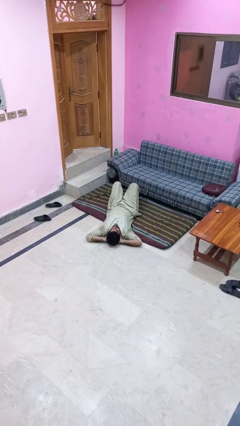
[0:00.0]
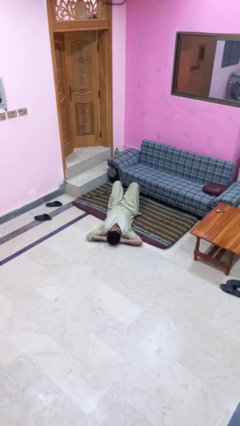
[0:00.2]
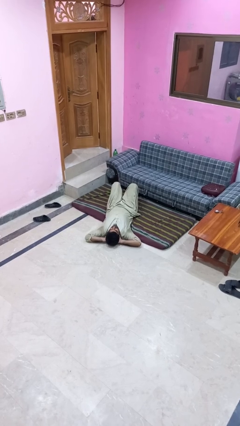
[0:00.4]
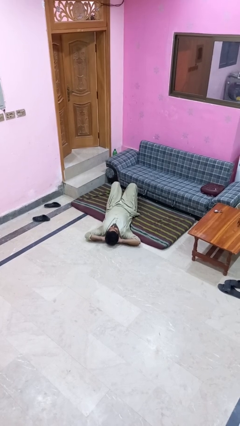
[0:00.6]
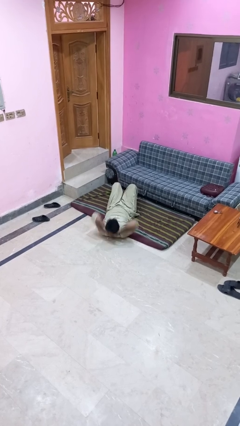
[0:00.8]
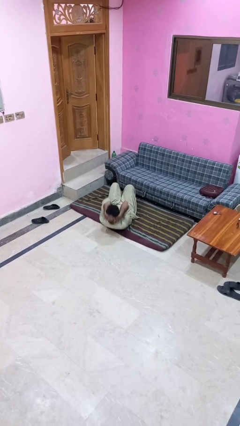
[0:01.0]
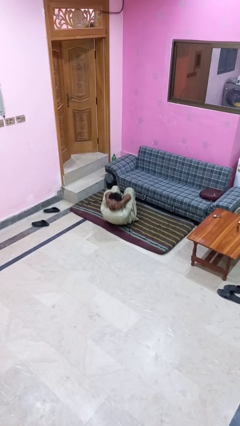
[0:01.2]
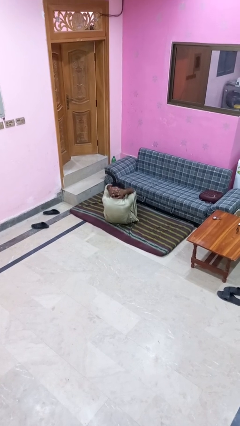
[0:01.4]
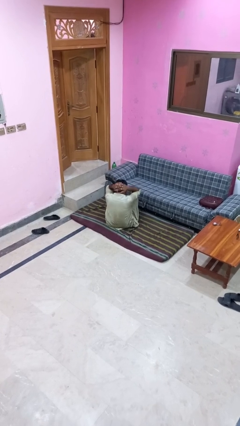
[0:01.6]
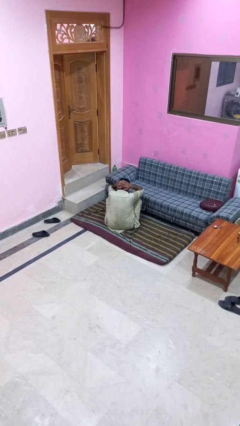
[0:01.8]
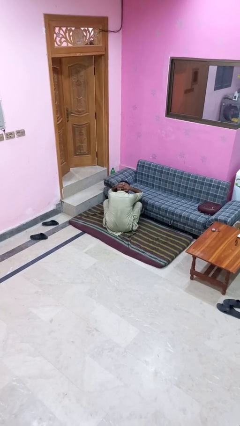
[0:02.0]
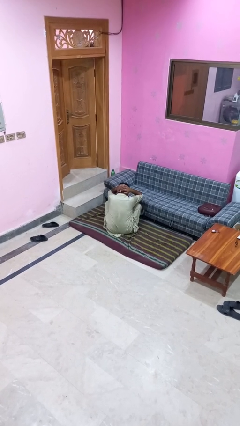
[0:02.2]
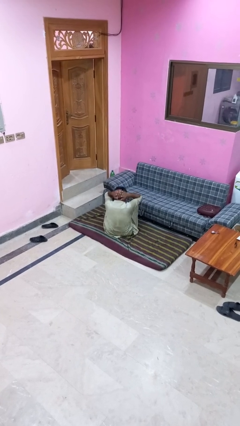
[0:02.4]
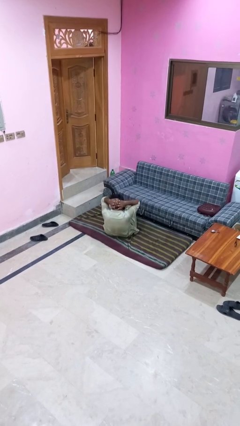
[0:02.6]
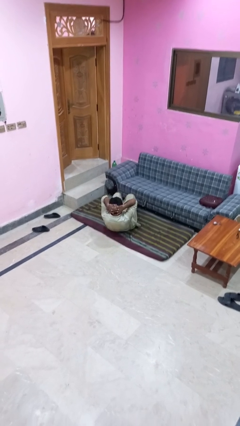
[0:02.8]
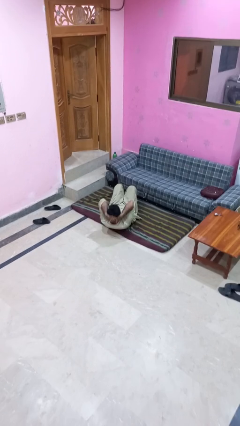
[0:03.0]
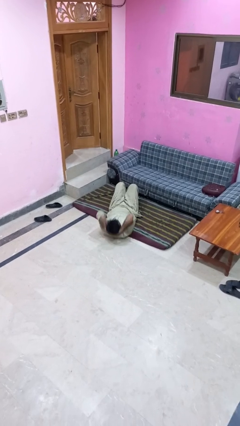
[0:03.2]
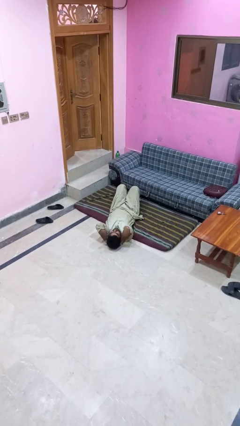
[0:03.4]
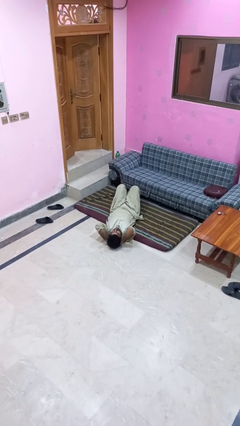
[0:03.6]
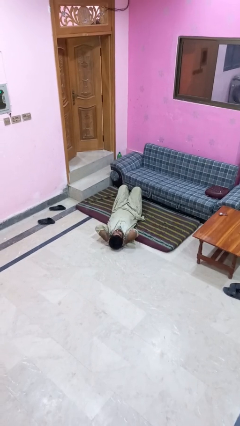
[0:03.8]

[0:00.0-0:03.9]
person exercises with situp

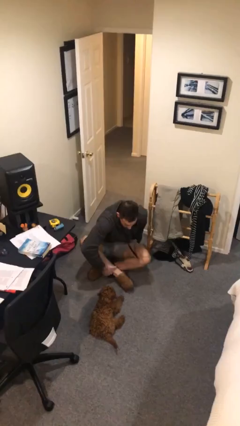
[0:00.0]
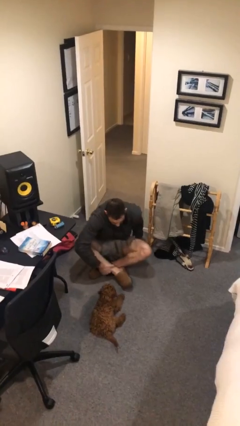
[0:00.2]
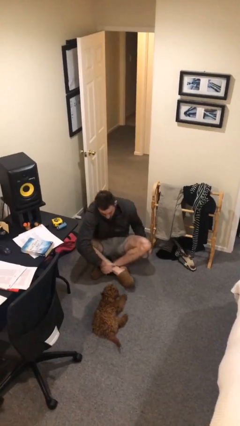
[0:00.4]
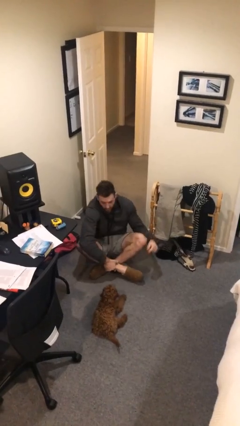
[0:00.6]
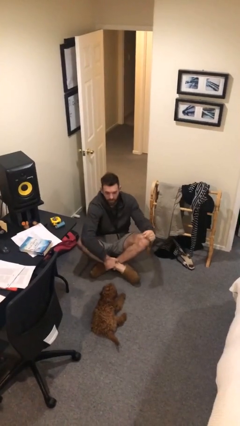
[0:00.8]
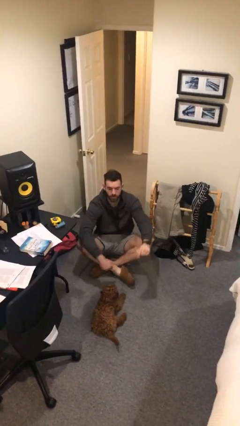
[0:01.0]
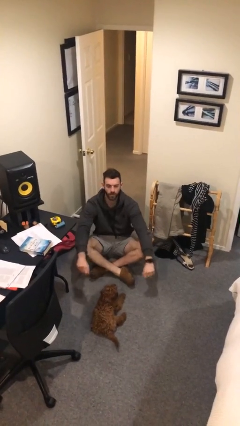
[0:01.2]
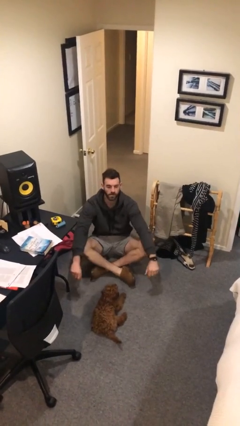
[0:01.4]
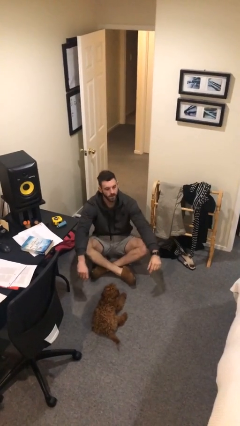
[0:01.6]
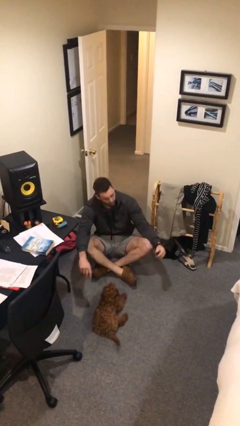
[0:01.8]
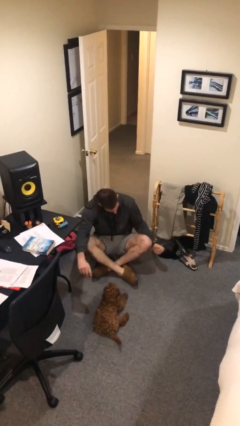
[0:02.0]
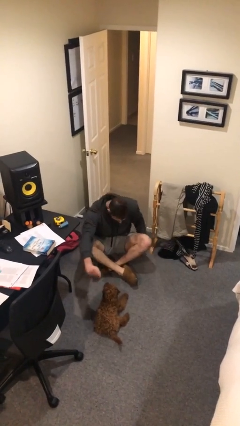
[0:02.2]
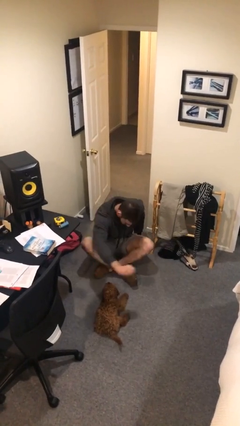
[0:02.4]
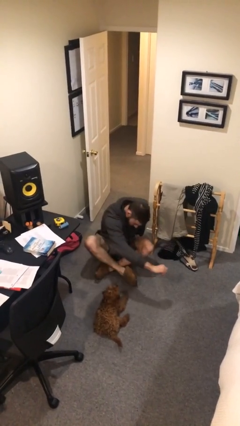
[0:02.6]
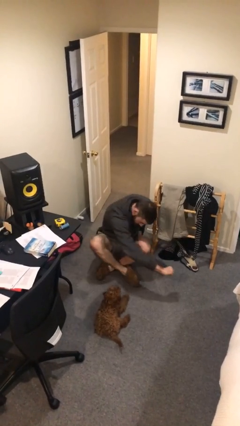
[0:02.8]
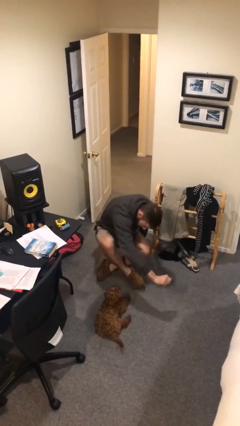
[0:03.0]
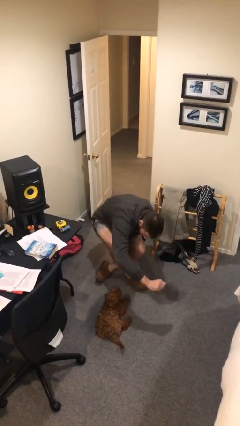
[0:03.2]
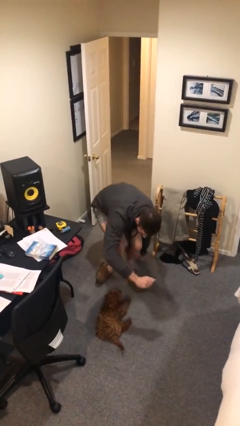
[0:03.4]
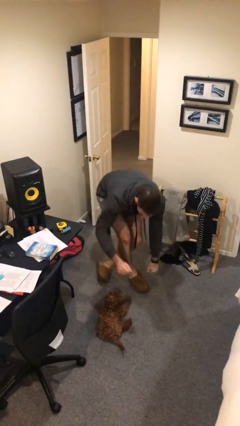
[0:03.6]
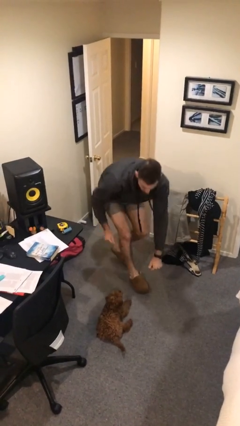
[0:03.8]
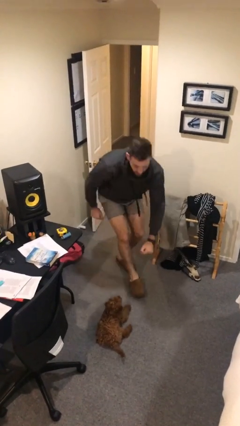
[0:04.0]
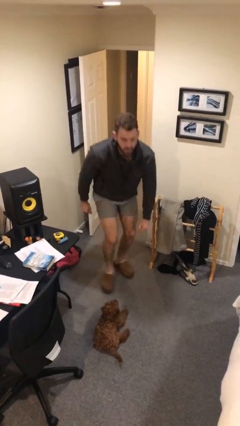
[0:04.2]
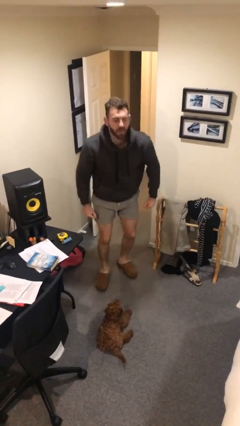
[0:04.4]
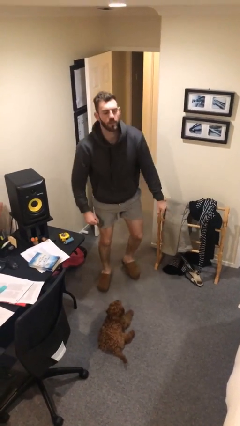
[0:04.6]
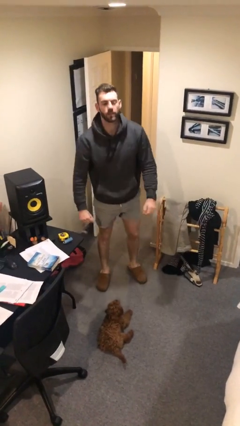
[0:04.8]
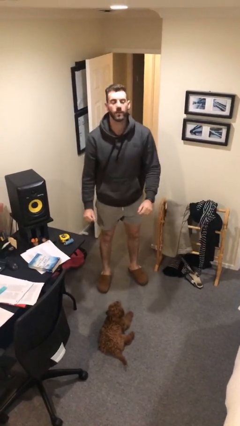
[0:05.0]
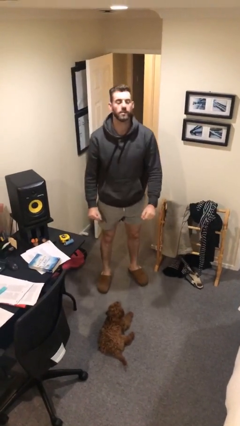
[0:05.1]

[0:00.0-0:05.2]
person stands up from floor

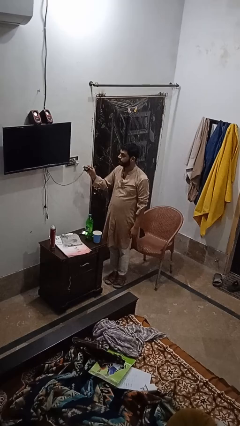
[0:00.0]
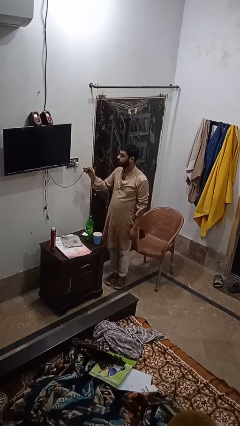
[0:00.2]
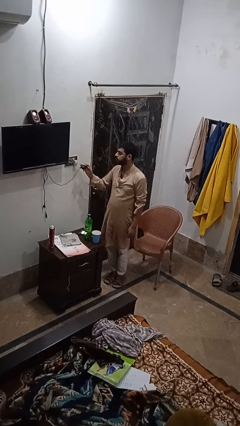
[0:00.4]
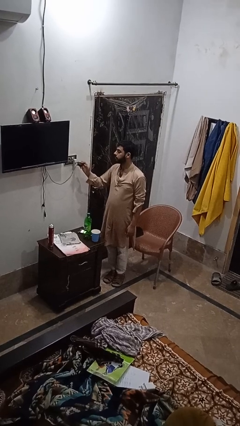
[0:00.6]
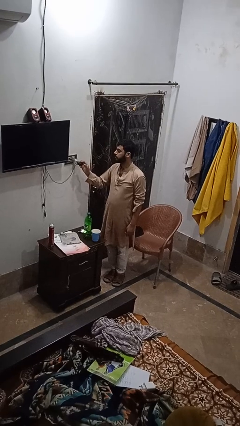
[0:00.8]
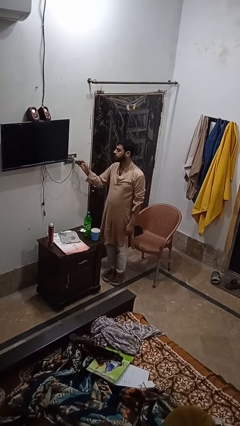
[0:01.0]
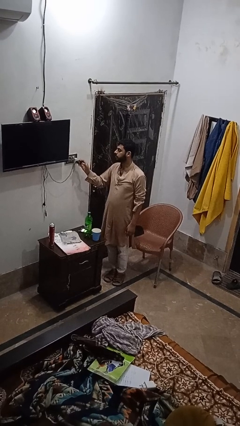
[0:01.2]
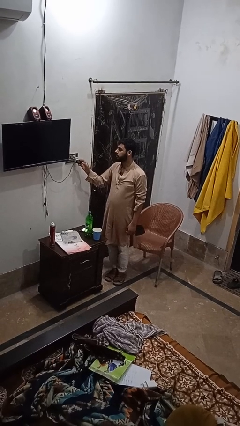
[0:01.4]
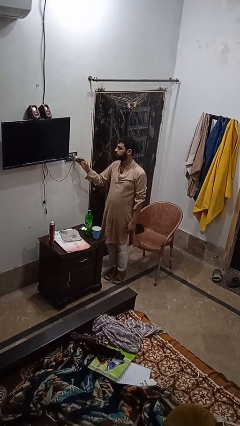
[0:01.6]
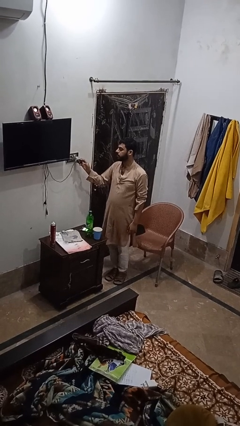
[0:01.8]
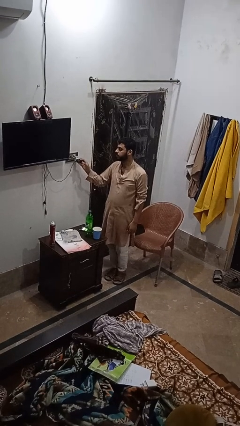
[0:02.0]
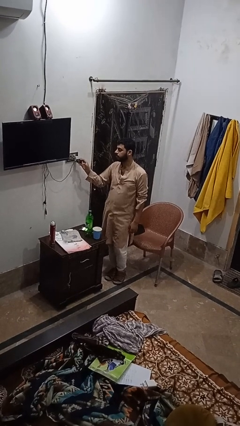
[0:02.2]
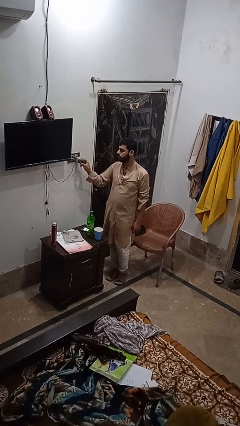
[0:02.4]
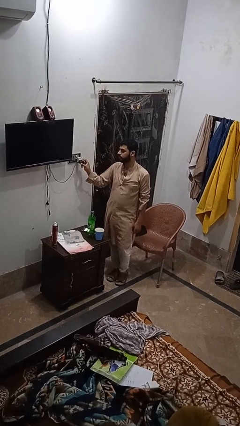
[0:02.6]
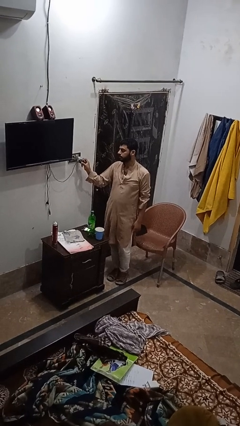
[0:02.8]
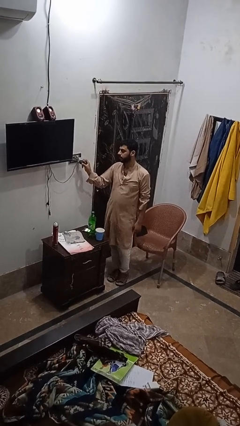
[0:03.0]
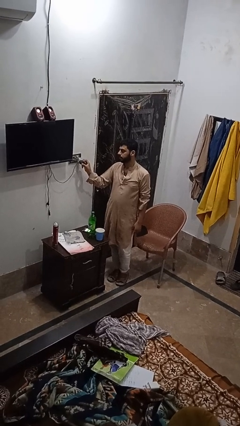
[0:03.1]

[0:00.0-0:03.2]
person plugs into electrical socket

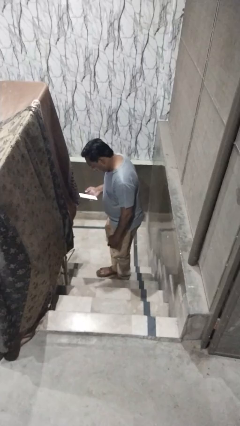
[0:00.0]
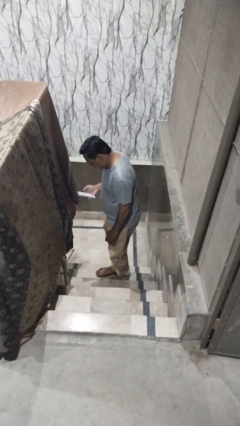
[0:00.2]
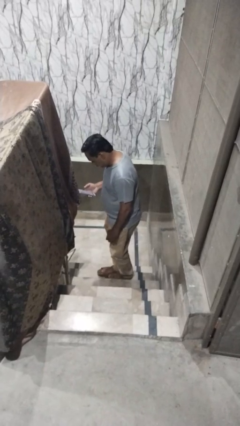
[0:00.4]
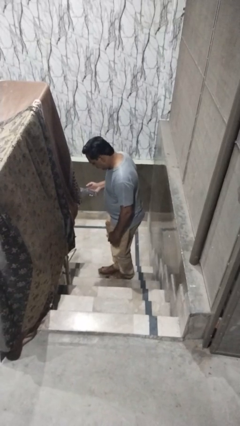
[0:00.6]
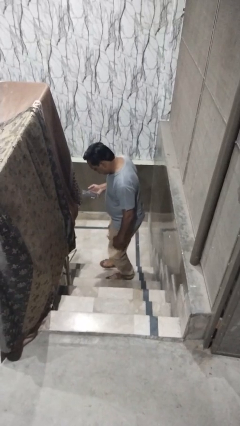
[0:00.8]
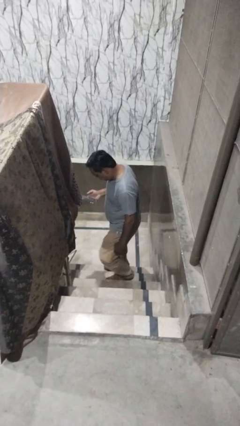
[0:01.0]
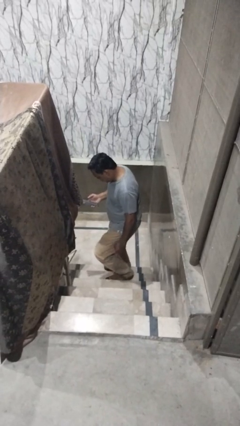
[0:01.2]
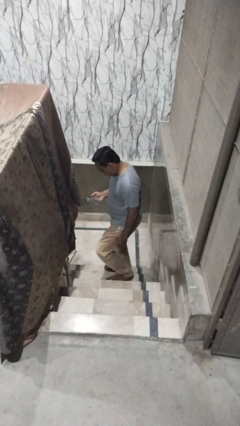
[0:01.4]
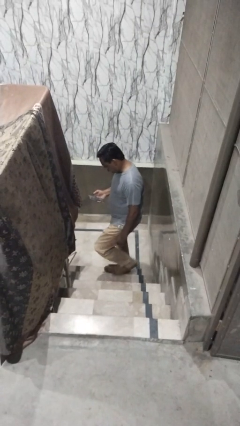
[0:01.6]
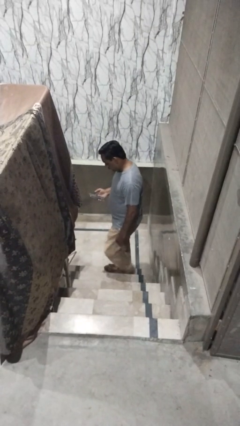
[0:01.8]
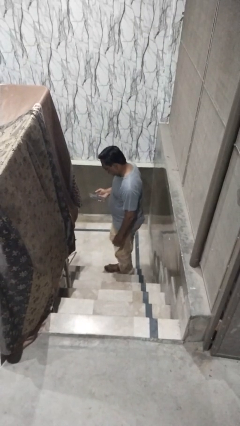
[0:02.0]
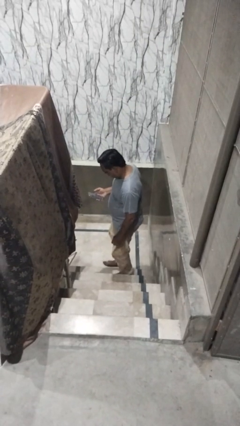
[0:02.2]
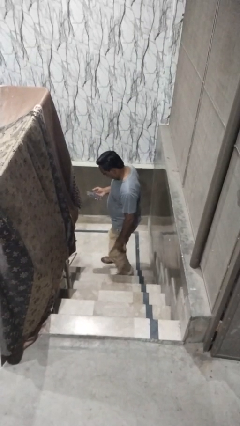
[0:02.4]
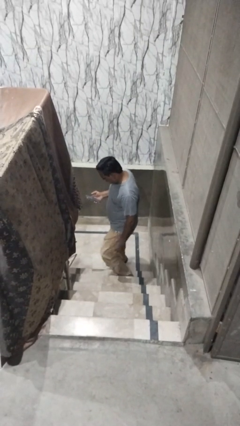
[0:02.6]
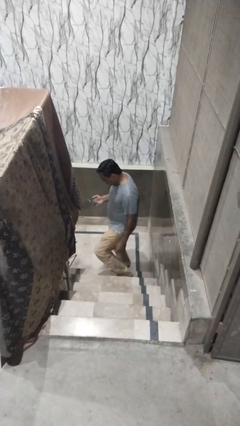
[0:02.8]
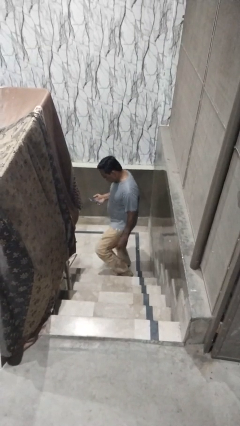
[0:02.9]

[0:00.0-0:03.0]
person climbs down stairs

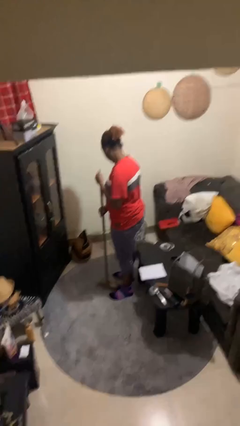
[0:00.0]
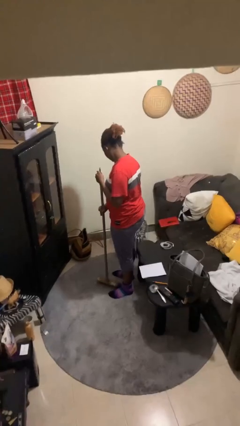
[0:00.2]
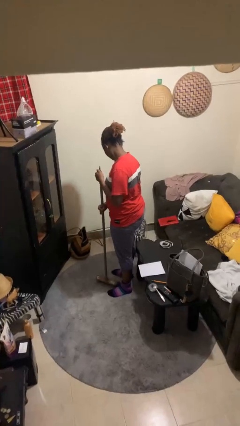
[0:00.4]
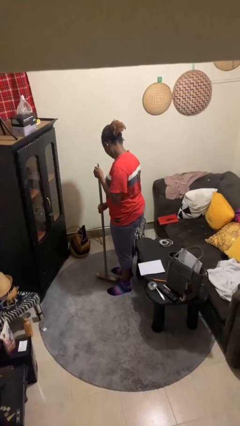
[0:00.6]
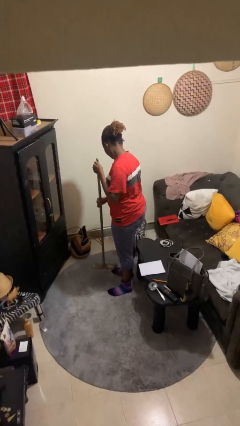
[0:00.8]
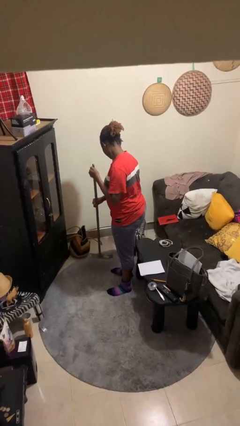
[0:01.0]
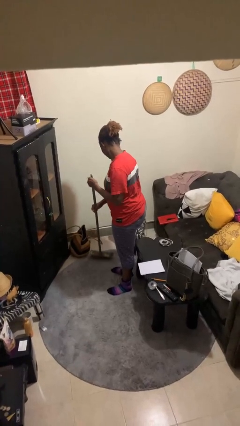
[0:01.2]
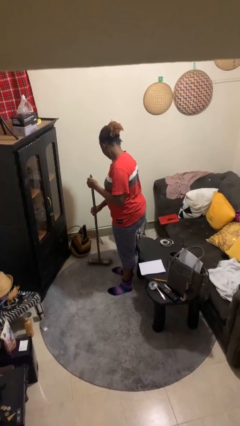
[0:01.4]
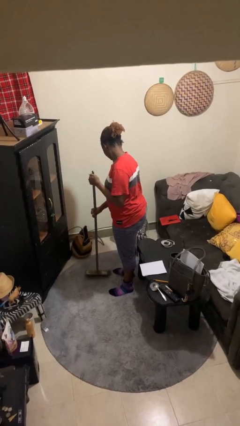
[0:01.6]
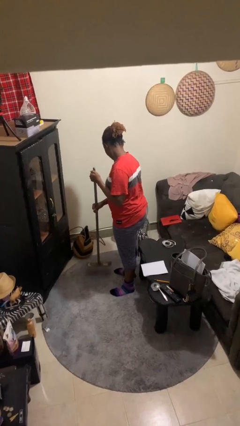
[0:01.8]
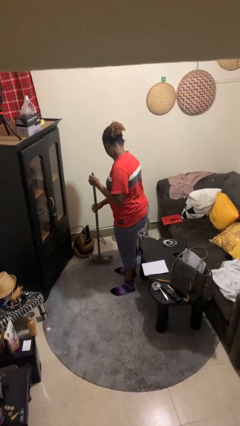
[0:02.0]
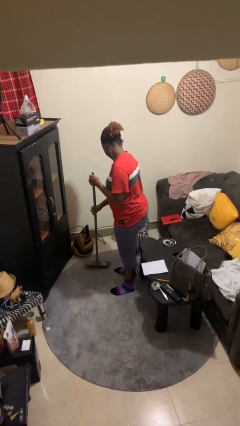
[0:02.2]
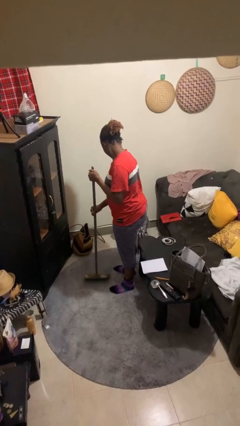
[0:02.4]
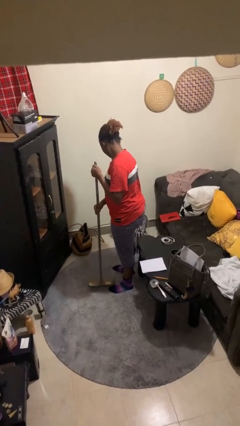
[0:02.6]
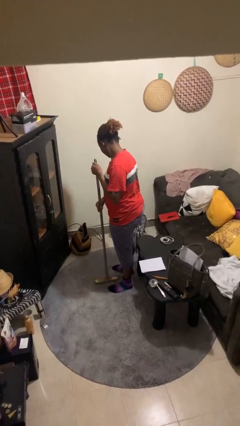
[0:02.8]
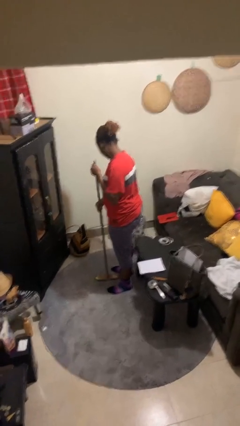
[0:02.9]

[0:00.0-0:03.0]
person sweeps floor
